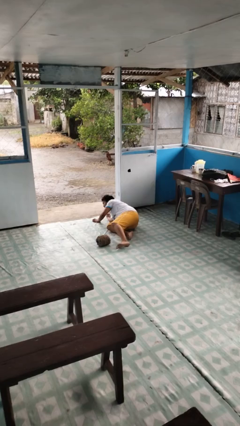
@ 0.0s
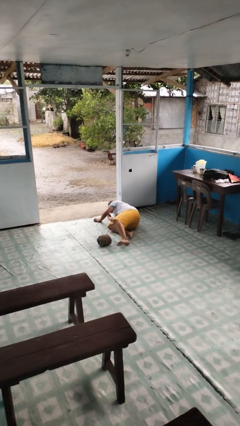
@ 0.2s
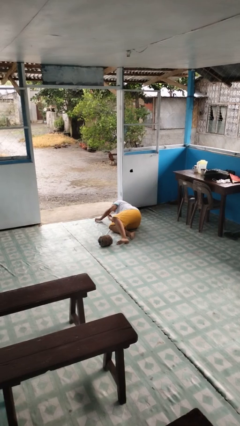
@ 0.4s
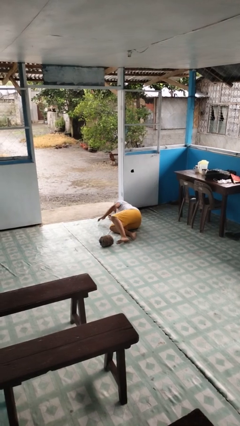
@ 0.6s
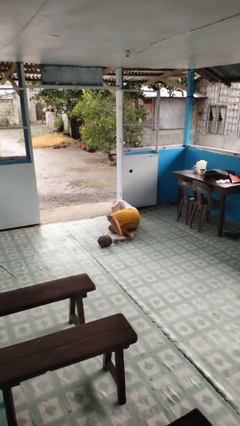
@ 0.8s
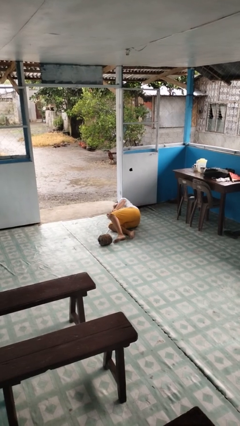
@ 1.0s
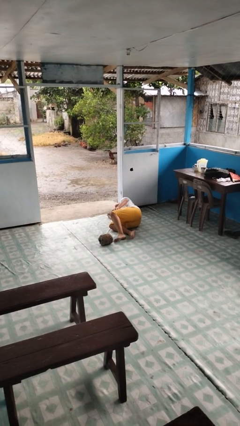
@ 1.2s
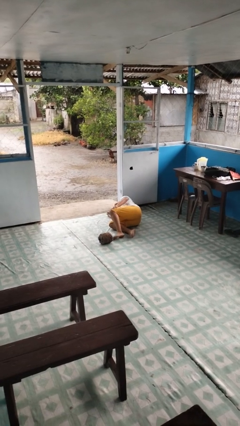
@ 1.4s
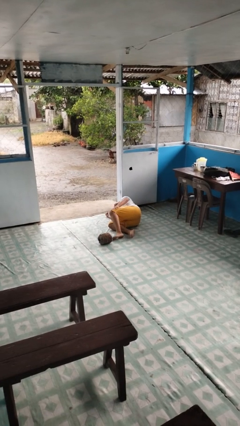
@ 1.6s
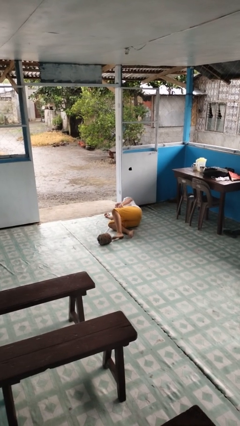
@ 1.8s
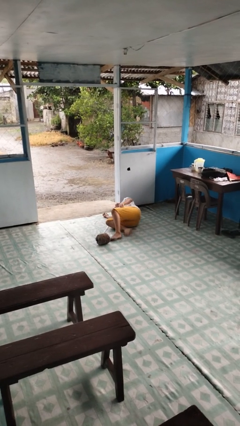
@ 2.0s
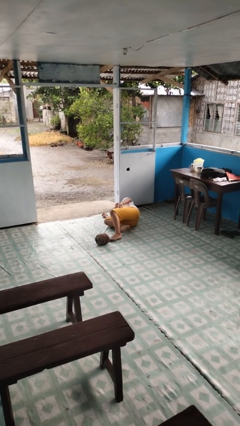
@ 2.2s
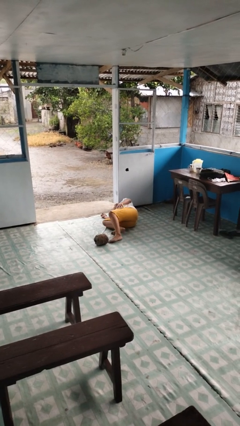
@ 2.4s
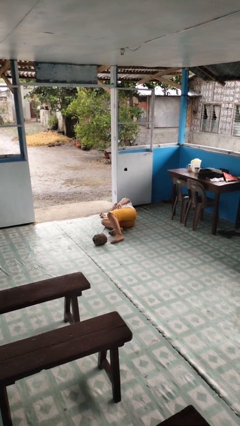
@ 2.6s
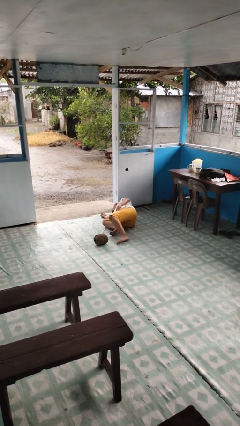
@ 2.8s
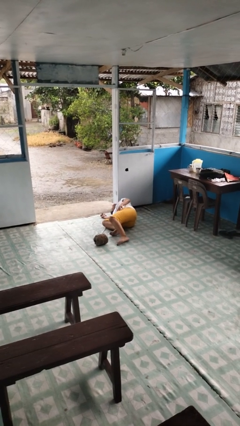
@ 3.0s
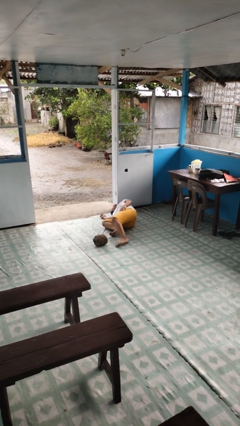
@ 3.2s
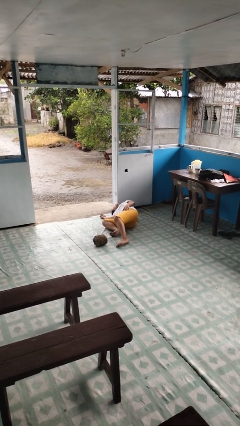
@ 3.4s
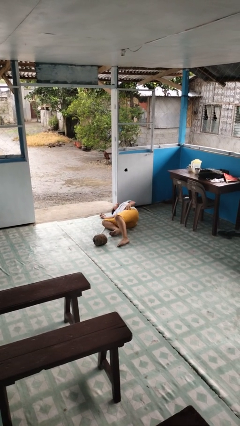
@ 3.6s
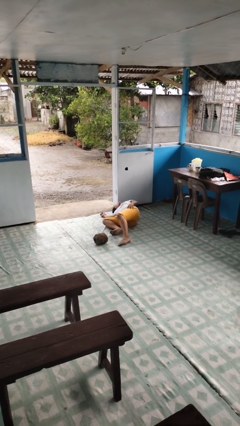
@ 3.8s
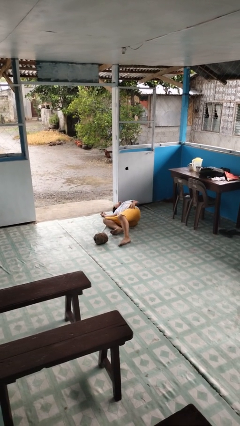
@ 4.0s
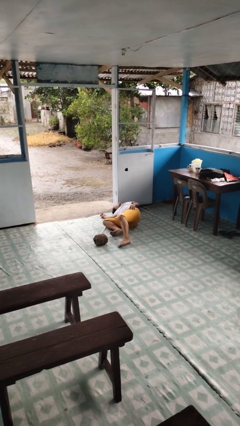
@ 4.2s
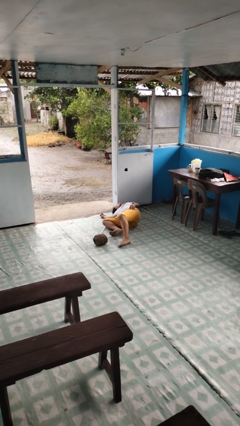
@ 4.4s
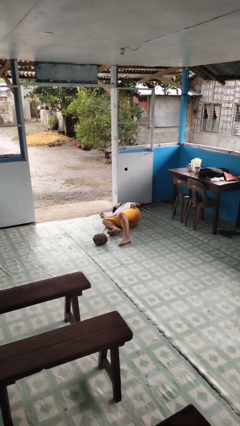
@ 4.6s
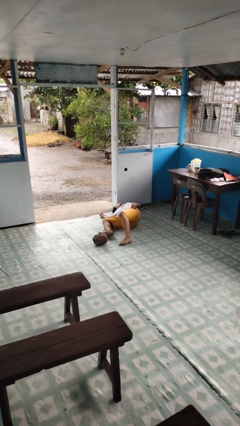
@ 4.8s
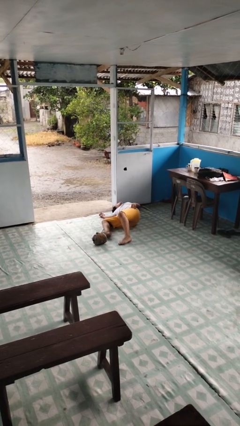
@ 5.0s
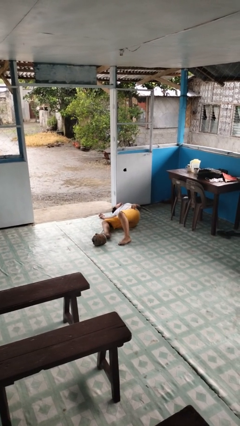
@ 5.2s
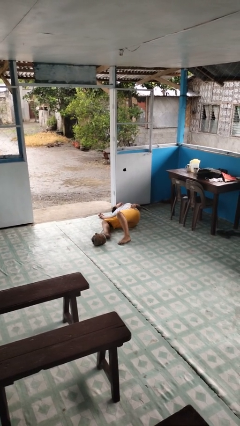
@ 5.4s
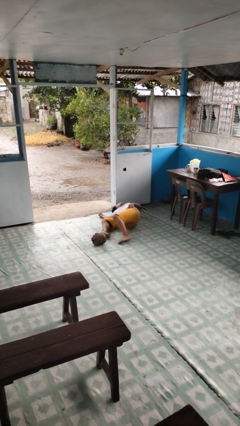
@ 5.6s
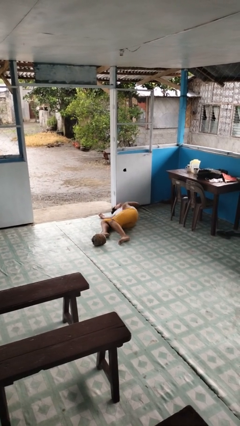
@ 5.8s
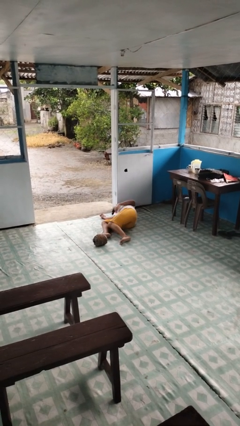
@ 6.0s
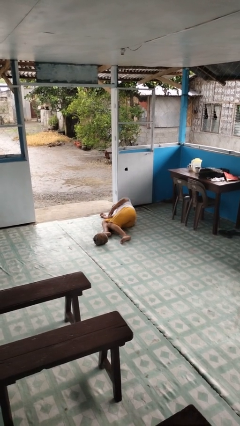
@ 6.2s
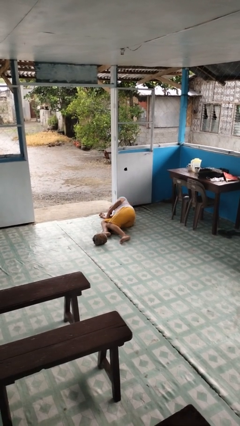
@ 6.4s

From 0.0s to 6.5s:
person lies down on floor

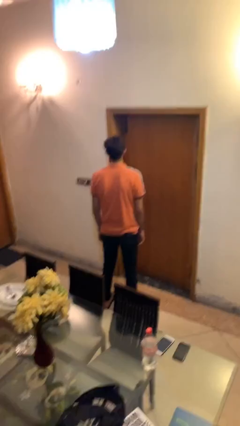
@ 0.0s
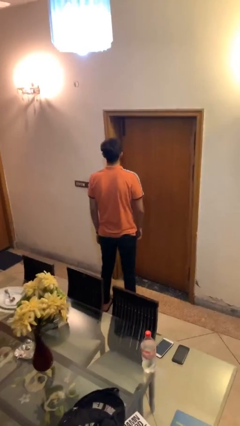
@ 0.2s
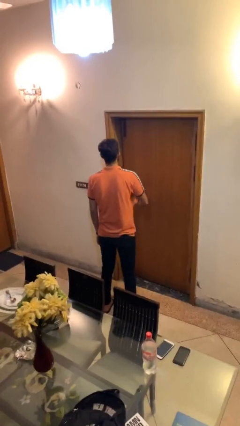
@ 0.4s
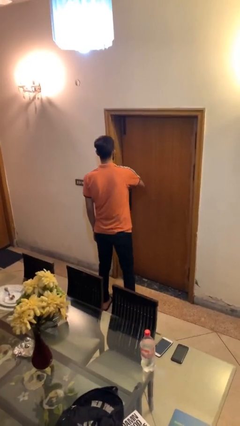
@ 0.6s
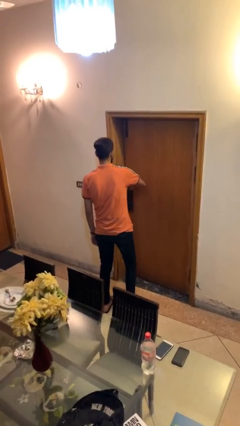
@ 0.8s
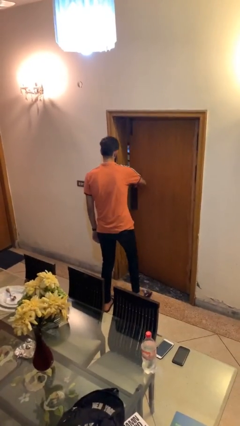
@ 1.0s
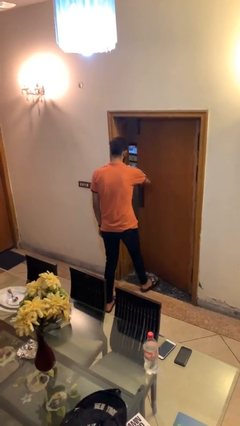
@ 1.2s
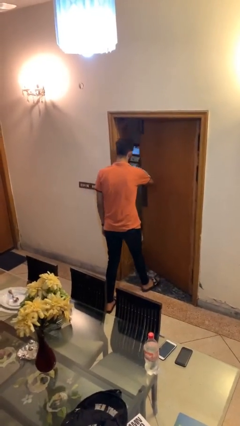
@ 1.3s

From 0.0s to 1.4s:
person opens facility door

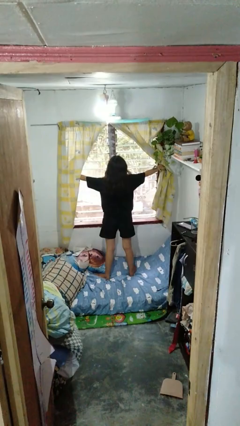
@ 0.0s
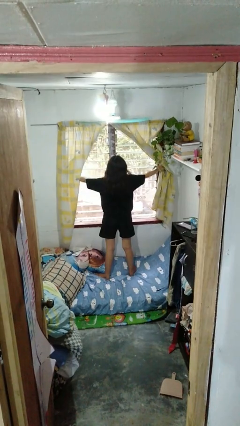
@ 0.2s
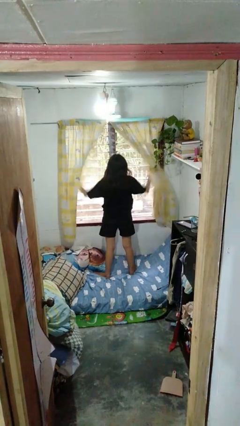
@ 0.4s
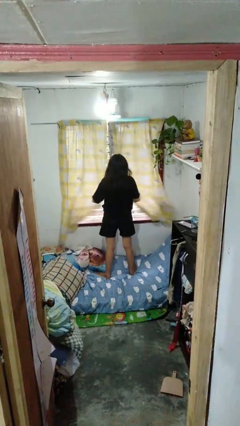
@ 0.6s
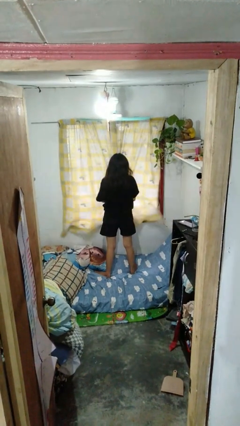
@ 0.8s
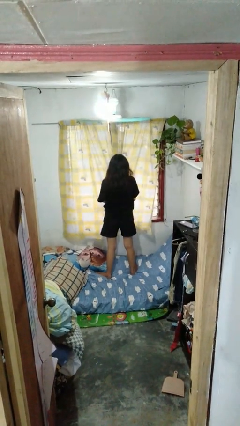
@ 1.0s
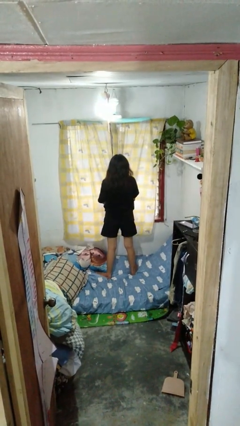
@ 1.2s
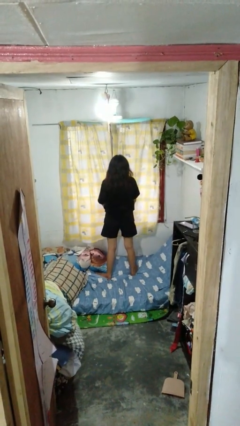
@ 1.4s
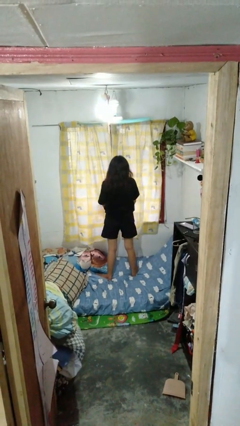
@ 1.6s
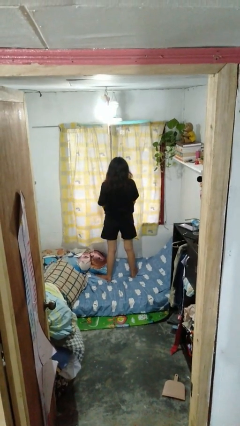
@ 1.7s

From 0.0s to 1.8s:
person closes curtains

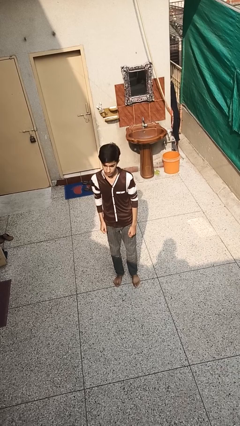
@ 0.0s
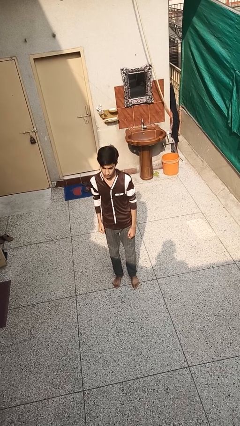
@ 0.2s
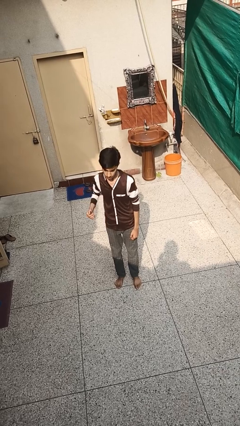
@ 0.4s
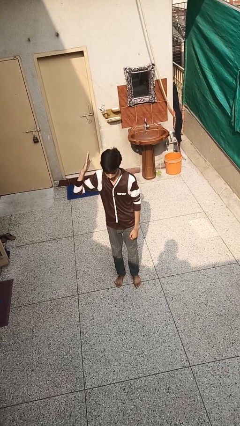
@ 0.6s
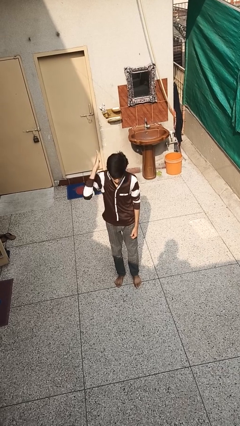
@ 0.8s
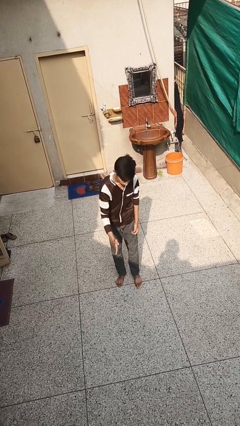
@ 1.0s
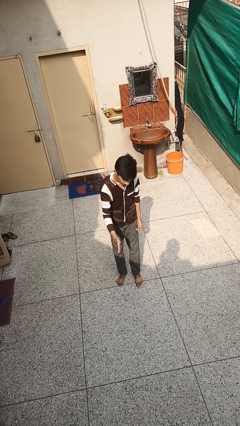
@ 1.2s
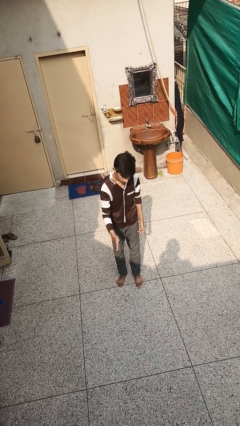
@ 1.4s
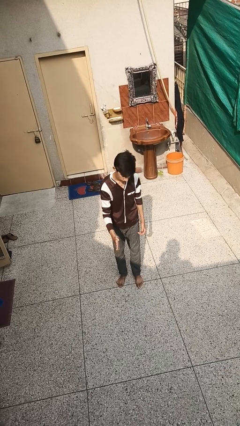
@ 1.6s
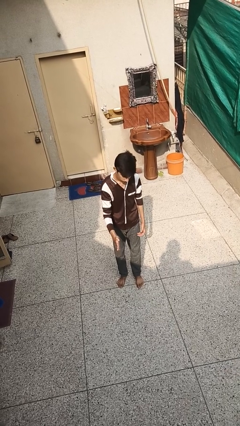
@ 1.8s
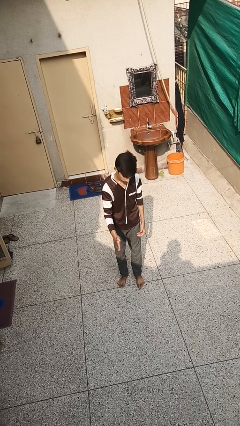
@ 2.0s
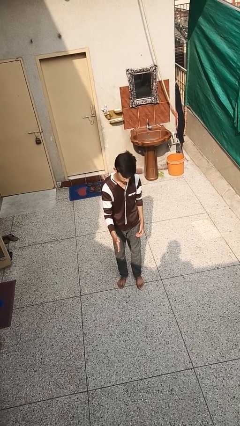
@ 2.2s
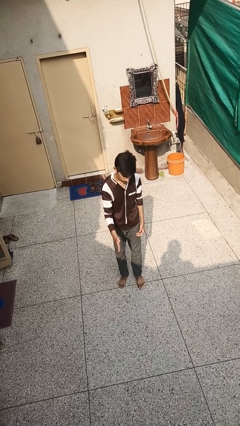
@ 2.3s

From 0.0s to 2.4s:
person karate chop

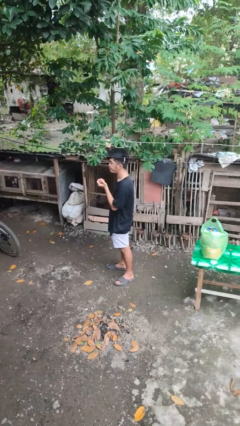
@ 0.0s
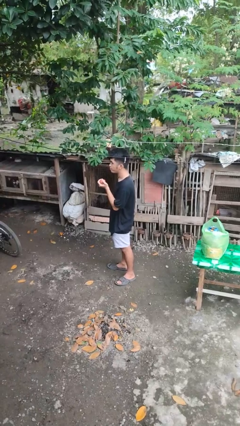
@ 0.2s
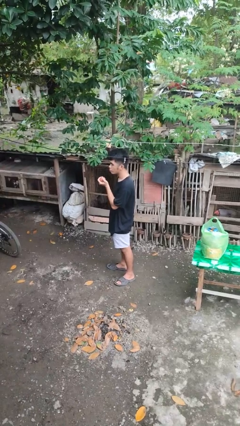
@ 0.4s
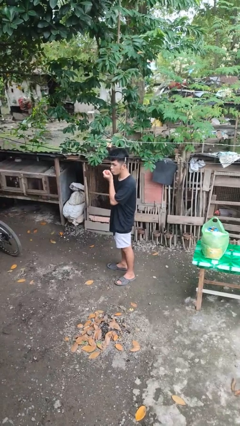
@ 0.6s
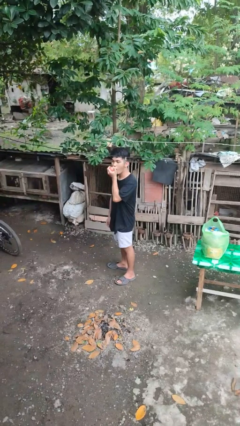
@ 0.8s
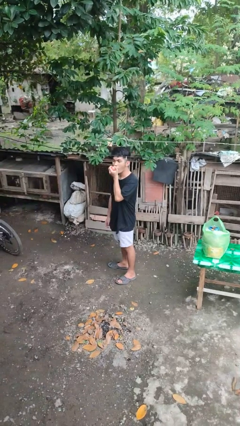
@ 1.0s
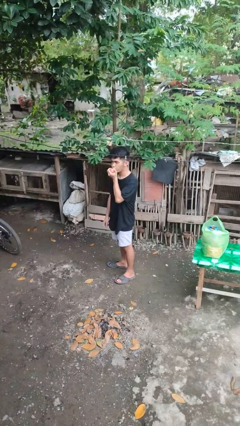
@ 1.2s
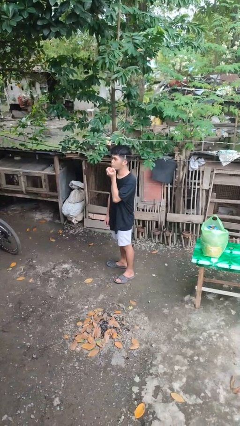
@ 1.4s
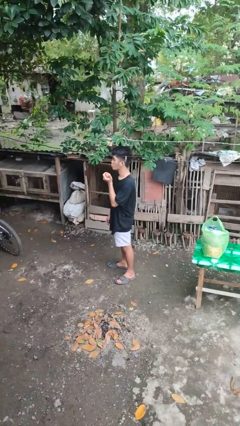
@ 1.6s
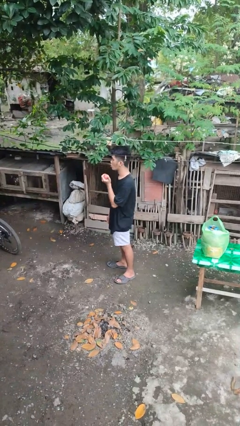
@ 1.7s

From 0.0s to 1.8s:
person eats apple

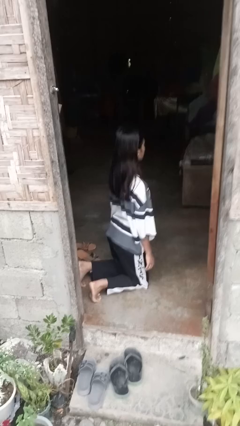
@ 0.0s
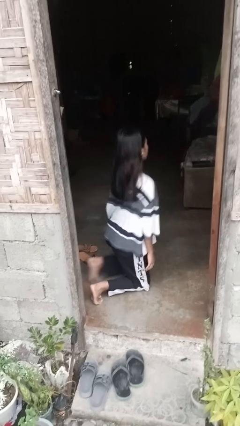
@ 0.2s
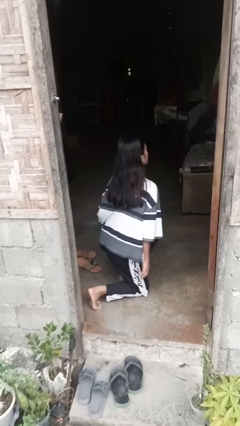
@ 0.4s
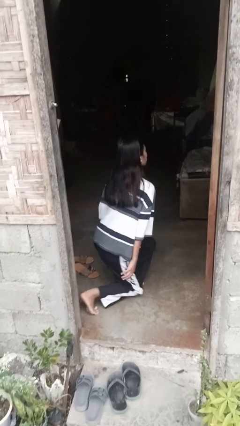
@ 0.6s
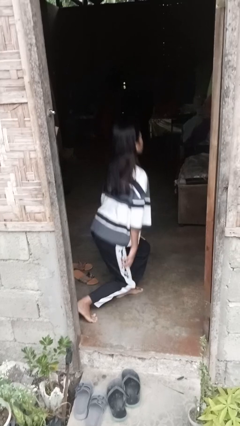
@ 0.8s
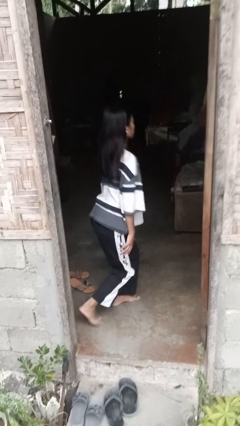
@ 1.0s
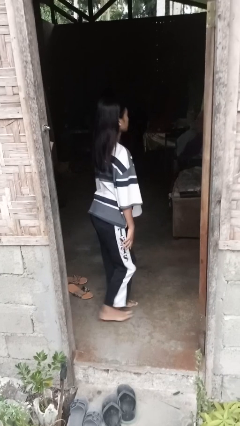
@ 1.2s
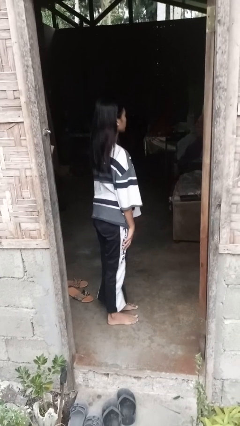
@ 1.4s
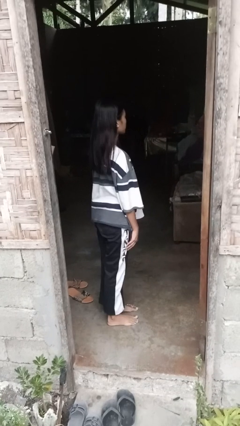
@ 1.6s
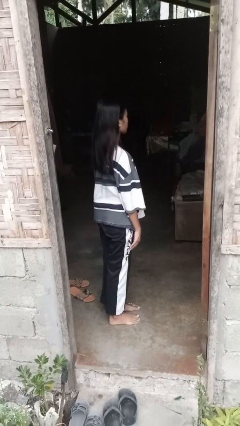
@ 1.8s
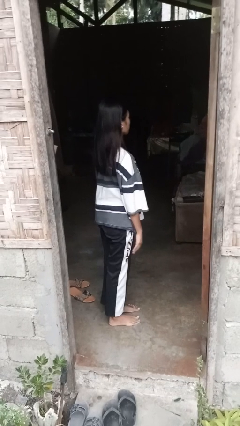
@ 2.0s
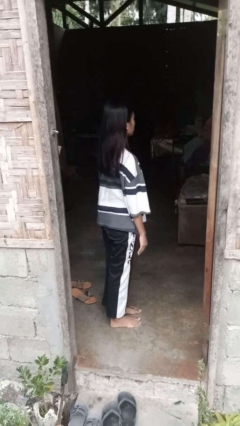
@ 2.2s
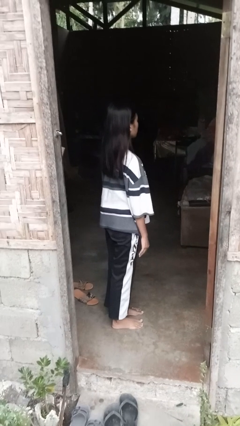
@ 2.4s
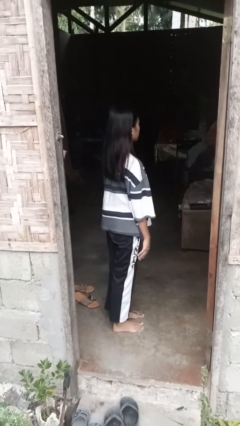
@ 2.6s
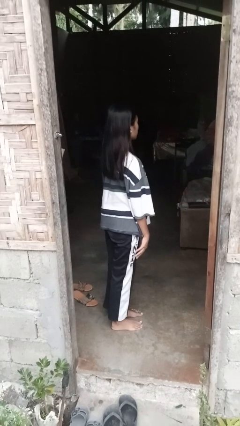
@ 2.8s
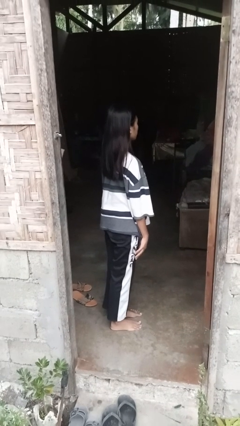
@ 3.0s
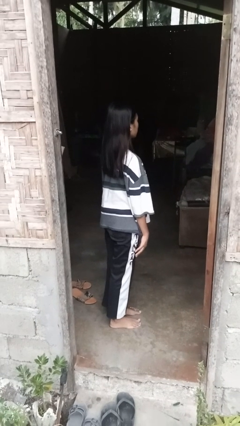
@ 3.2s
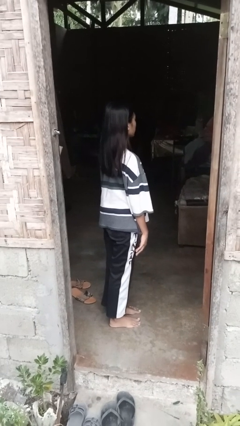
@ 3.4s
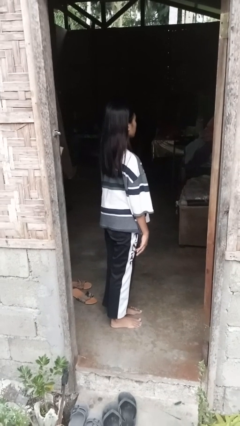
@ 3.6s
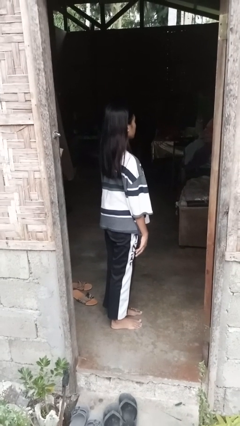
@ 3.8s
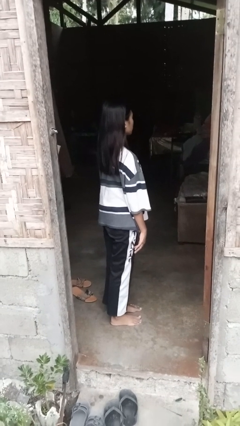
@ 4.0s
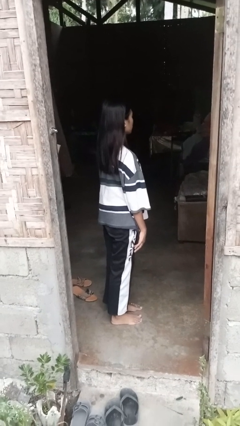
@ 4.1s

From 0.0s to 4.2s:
person stands up from floor
